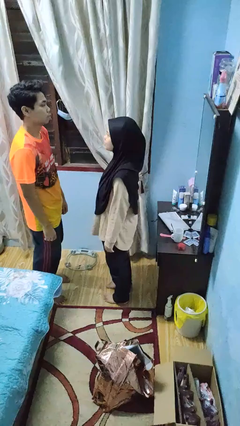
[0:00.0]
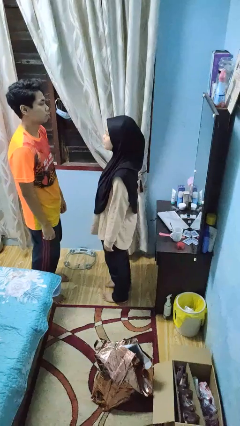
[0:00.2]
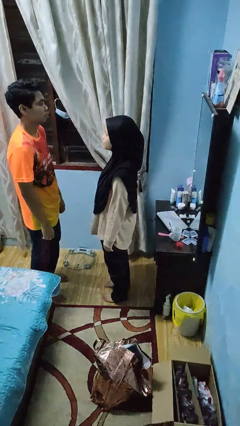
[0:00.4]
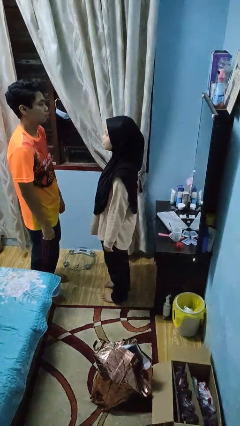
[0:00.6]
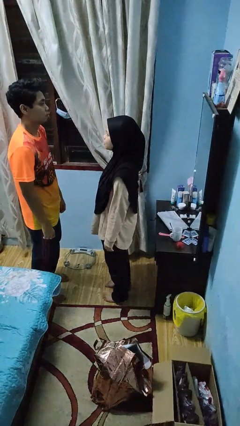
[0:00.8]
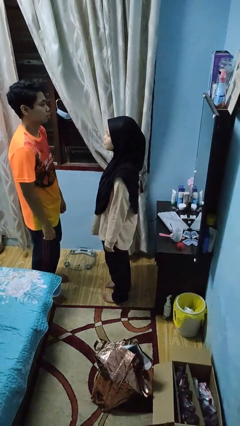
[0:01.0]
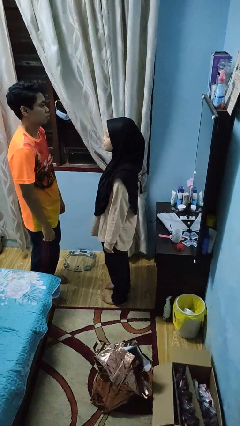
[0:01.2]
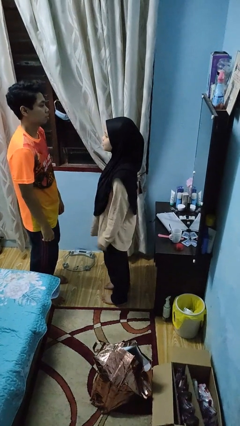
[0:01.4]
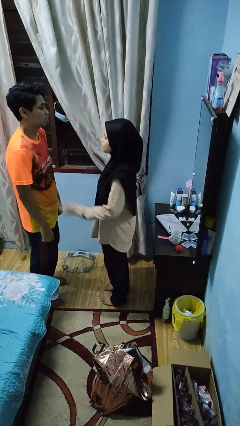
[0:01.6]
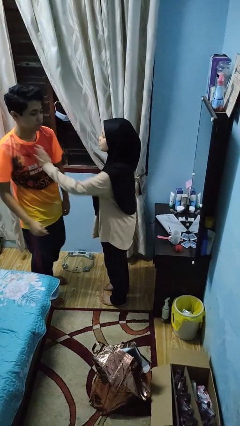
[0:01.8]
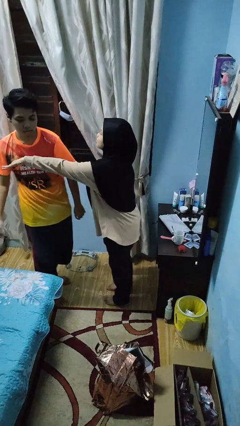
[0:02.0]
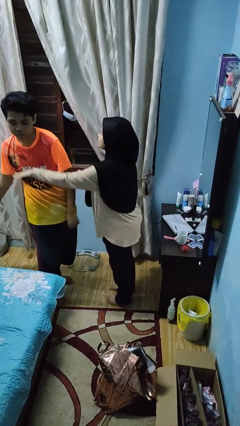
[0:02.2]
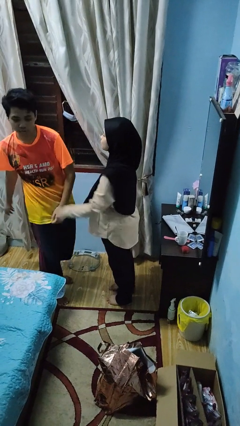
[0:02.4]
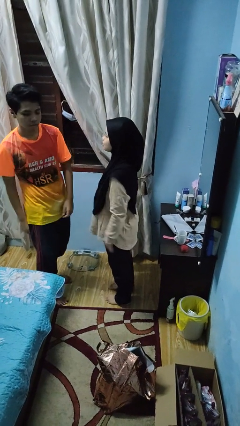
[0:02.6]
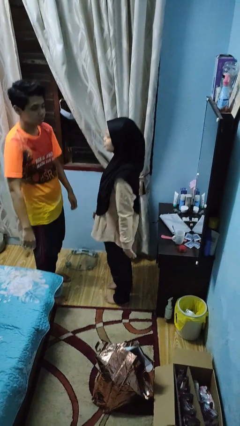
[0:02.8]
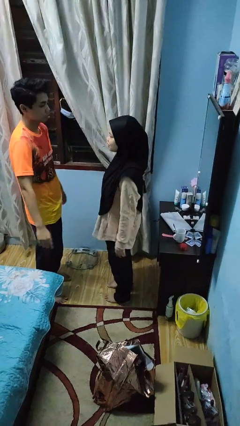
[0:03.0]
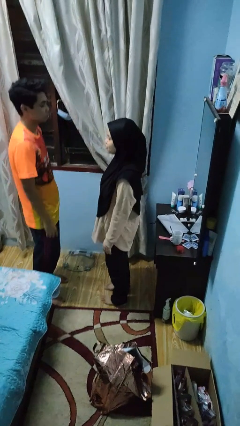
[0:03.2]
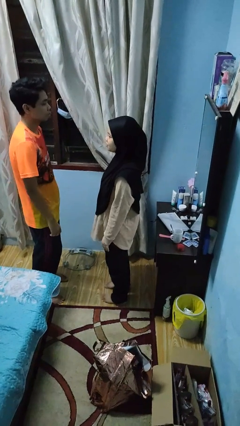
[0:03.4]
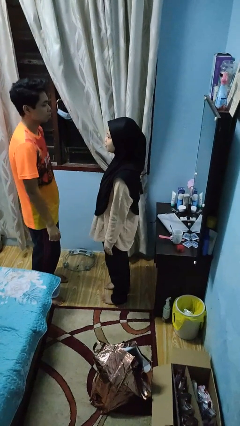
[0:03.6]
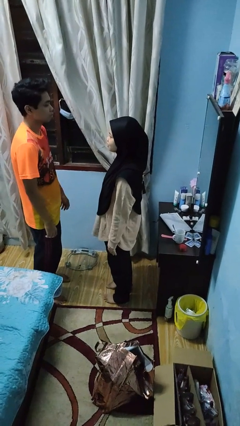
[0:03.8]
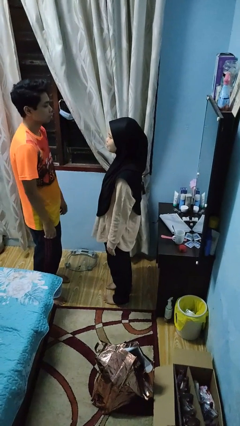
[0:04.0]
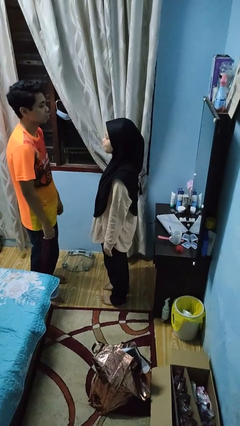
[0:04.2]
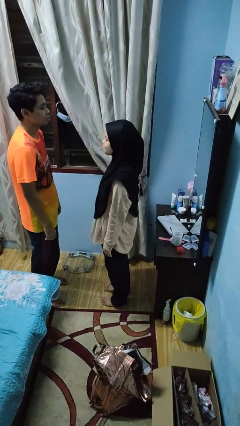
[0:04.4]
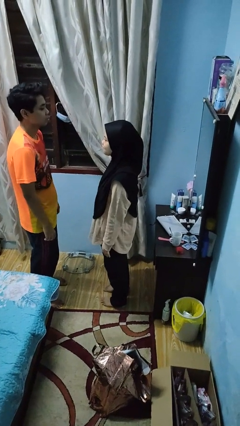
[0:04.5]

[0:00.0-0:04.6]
person shoves person

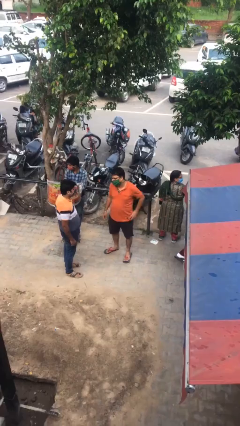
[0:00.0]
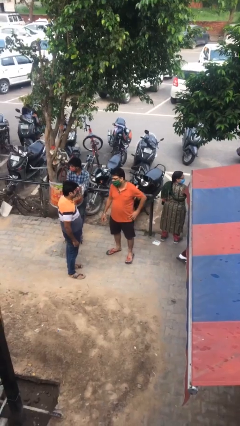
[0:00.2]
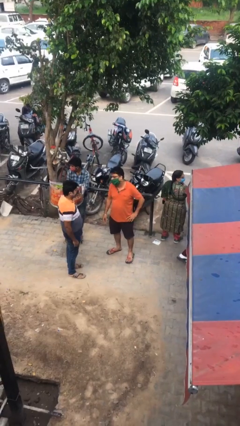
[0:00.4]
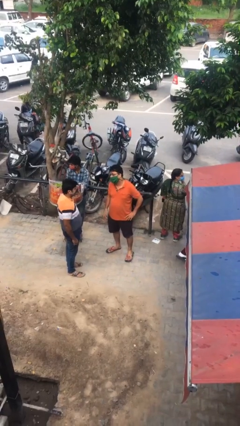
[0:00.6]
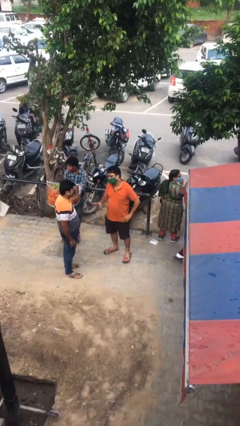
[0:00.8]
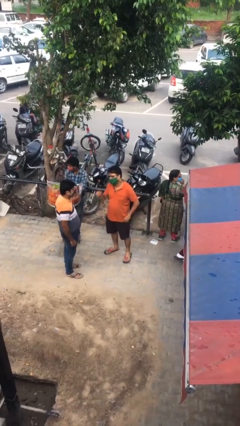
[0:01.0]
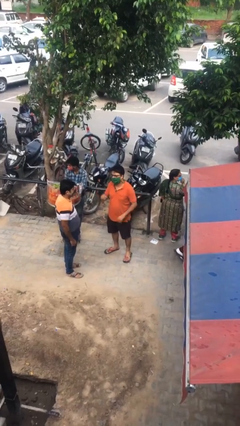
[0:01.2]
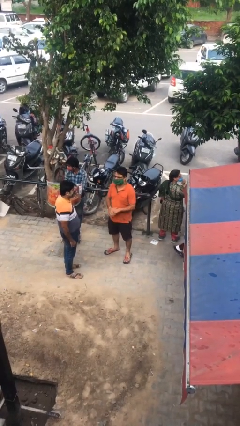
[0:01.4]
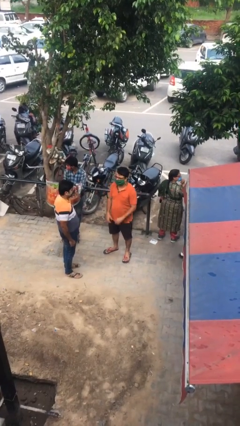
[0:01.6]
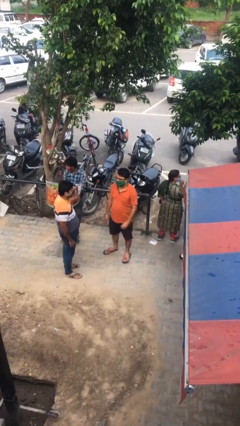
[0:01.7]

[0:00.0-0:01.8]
person talks to person

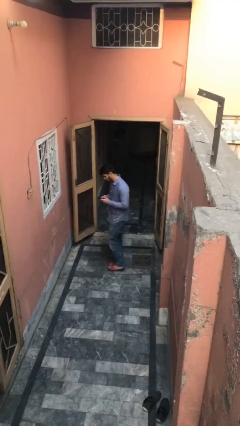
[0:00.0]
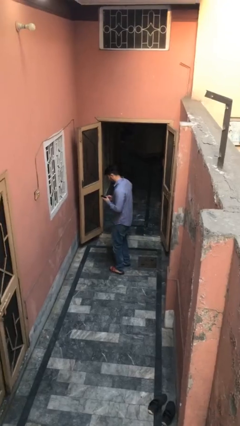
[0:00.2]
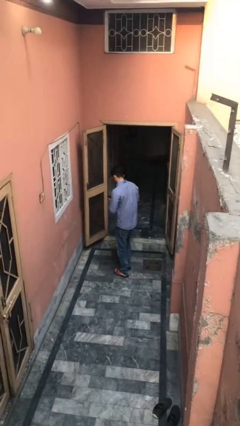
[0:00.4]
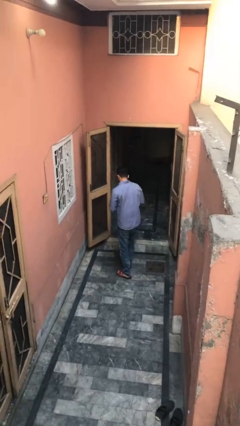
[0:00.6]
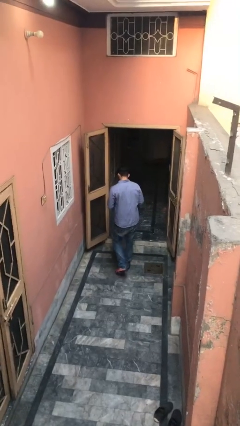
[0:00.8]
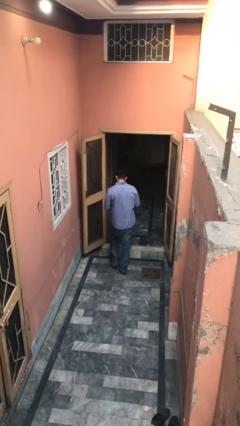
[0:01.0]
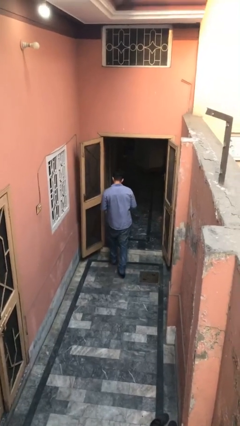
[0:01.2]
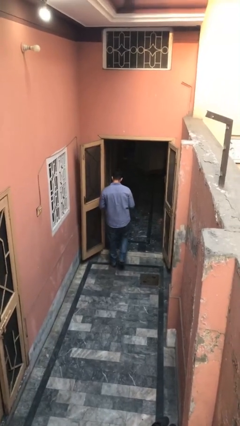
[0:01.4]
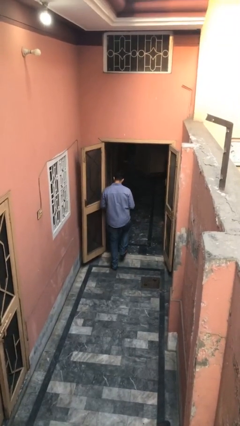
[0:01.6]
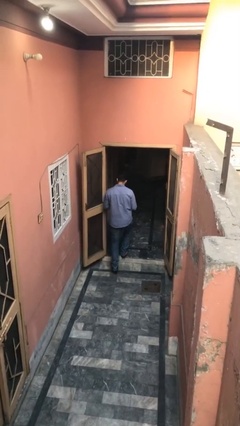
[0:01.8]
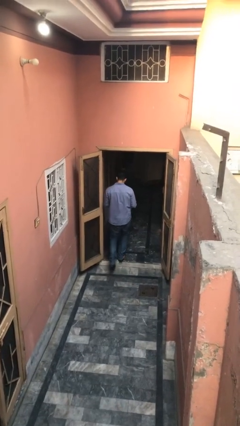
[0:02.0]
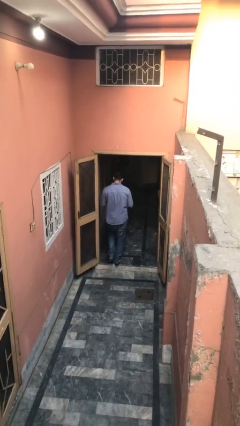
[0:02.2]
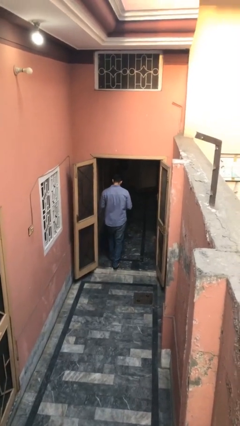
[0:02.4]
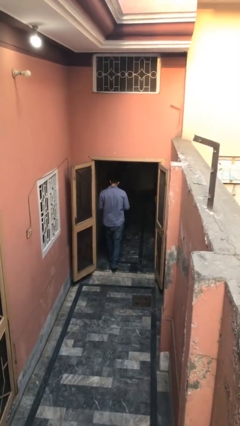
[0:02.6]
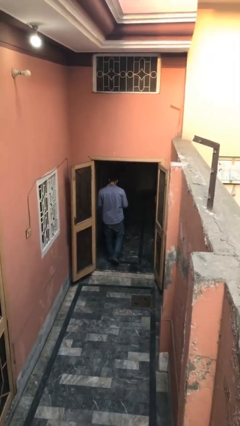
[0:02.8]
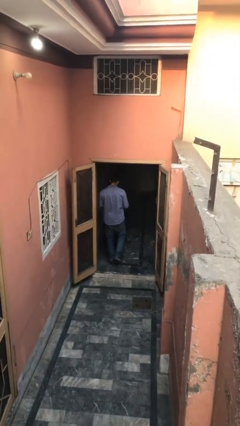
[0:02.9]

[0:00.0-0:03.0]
person exits scene through structure

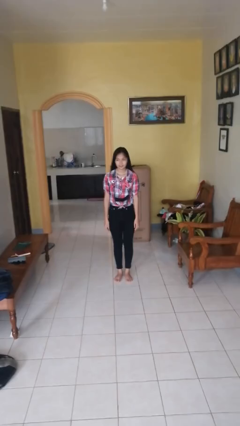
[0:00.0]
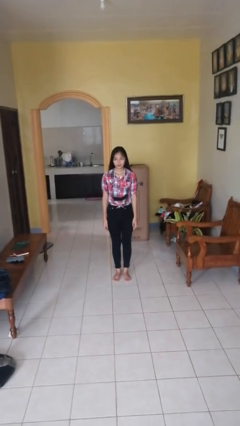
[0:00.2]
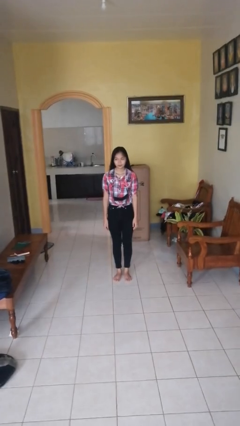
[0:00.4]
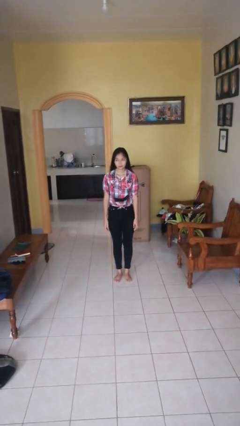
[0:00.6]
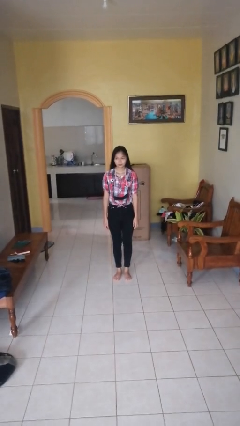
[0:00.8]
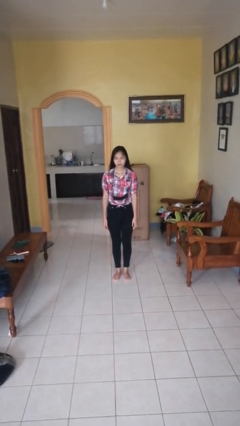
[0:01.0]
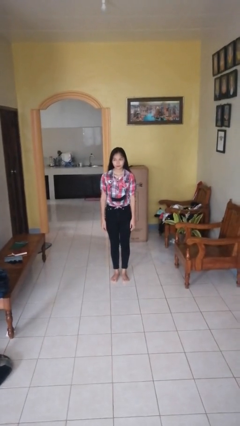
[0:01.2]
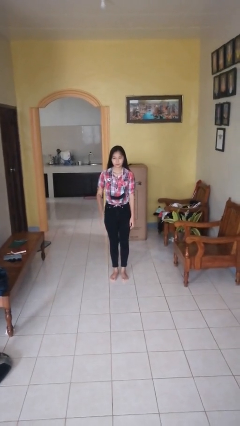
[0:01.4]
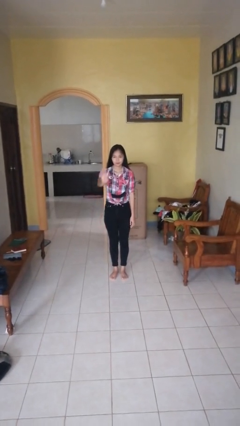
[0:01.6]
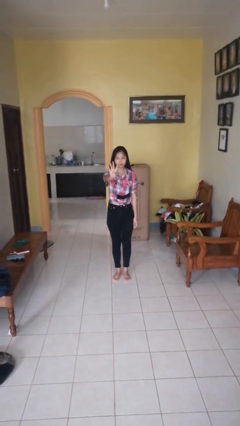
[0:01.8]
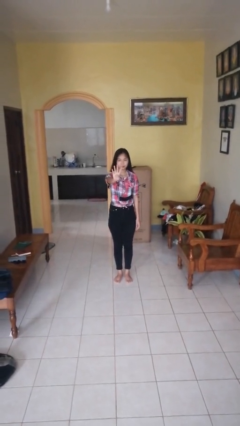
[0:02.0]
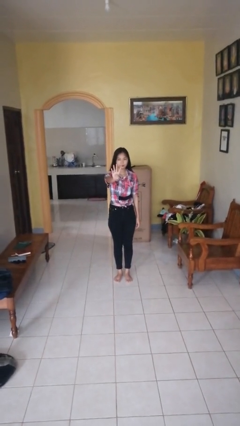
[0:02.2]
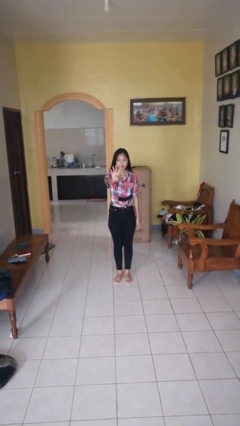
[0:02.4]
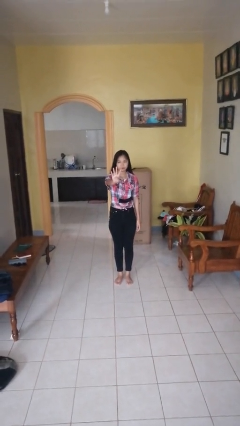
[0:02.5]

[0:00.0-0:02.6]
person gestures number four

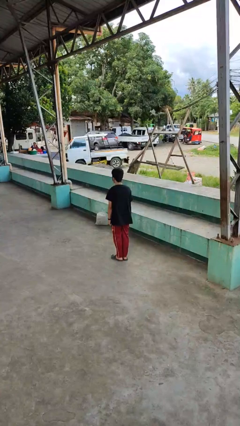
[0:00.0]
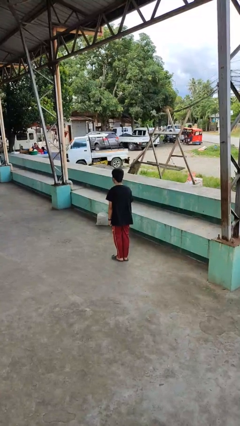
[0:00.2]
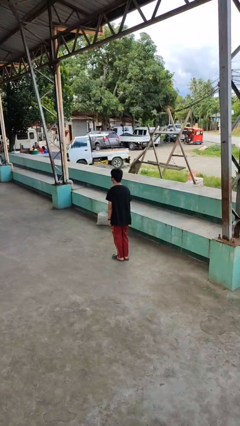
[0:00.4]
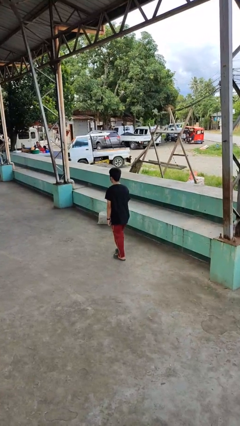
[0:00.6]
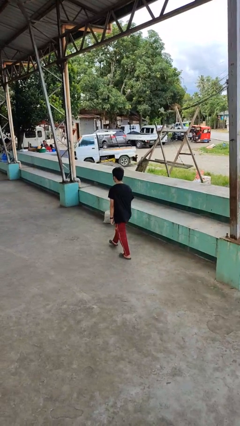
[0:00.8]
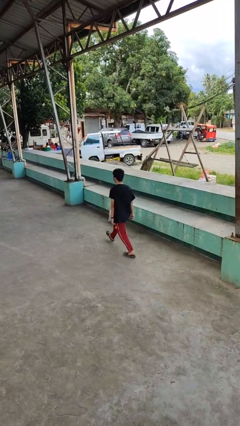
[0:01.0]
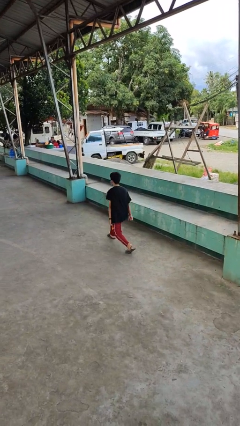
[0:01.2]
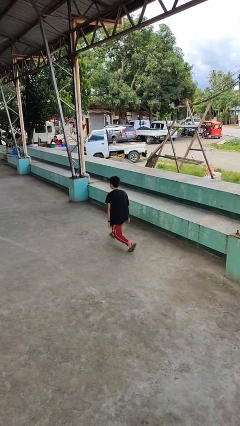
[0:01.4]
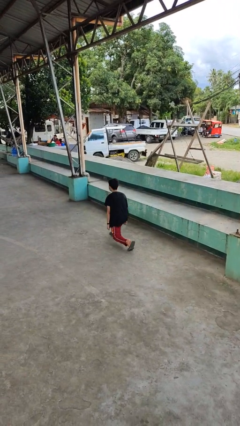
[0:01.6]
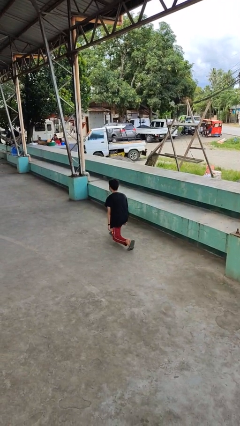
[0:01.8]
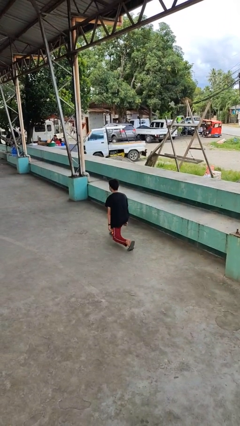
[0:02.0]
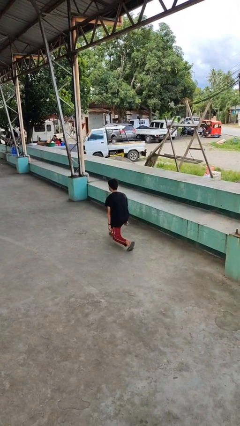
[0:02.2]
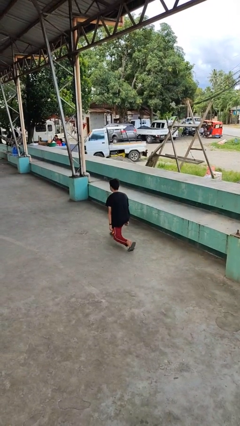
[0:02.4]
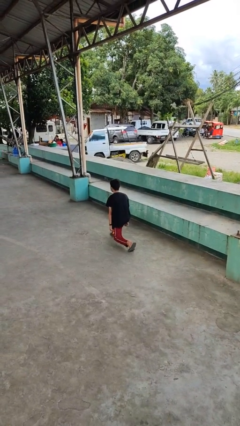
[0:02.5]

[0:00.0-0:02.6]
person exercises with lunges

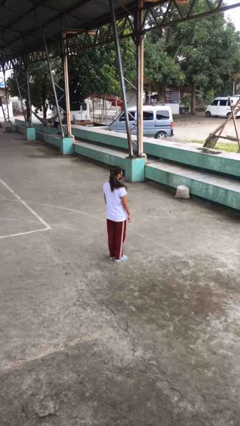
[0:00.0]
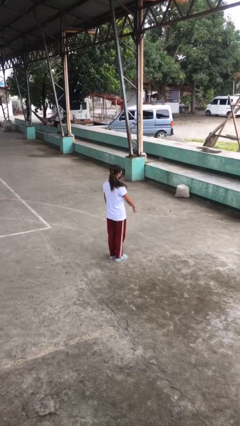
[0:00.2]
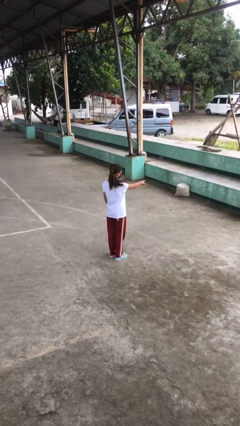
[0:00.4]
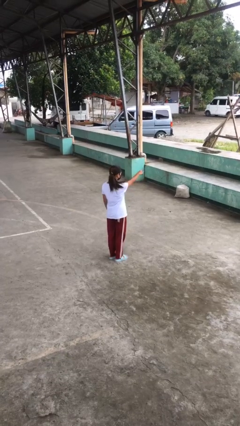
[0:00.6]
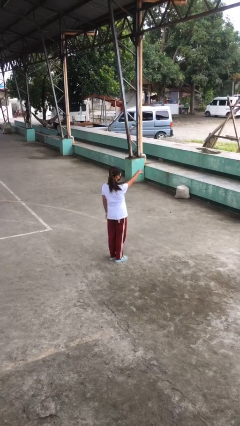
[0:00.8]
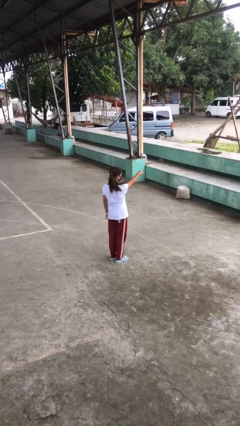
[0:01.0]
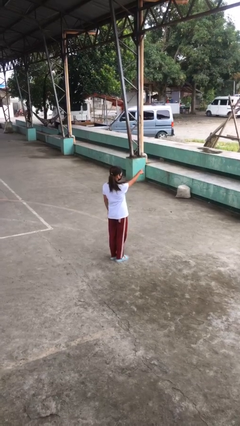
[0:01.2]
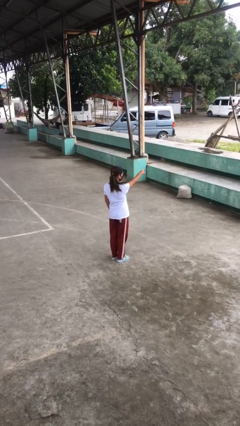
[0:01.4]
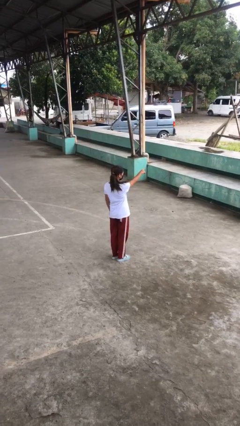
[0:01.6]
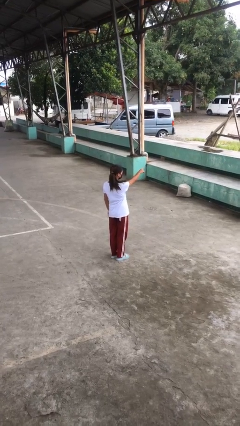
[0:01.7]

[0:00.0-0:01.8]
person points at person

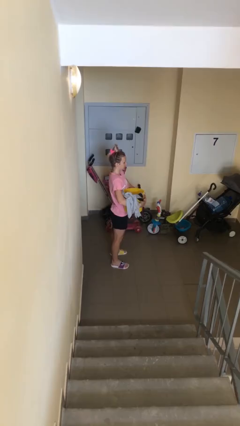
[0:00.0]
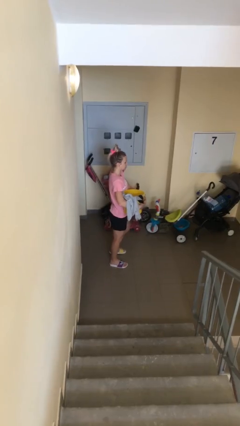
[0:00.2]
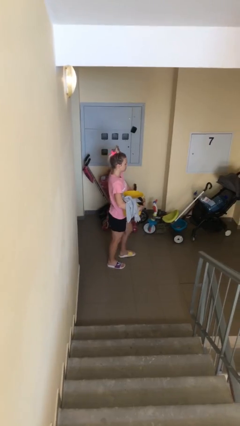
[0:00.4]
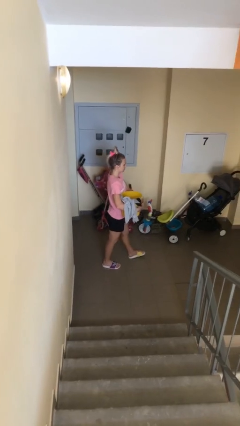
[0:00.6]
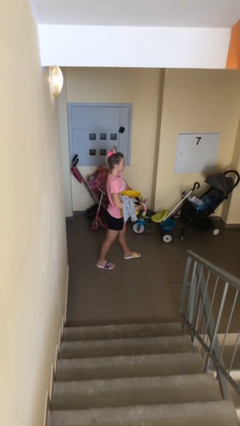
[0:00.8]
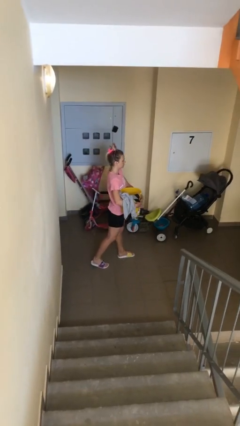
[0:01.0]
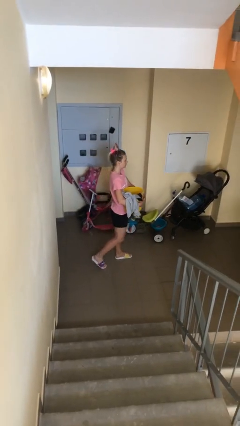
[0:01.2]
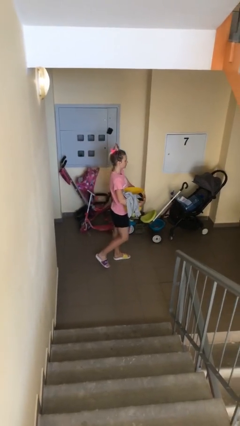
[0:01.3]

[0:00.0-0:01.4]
person carries laundry basket
